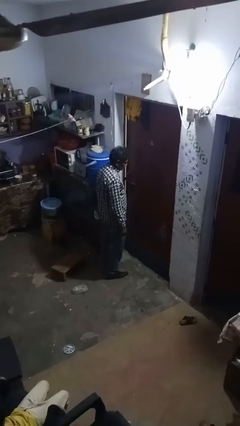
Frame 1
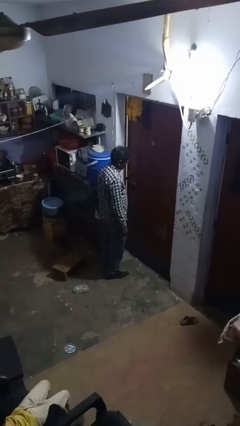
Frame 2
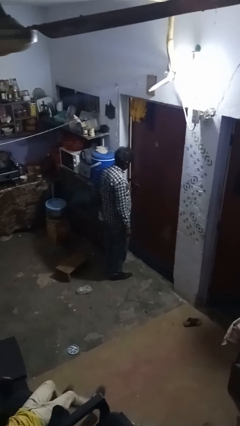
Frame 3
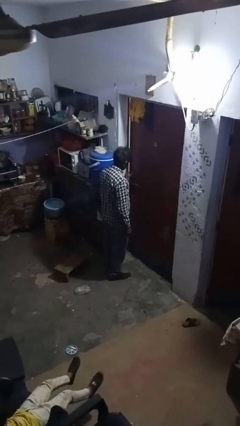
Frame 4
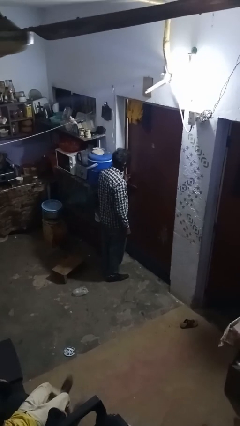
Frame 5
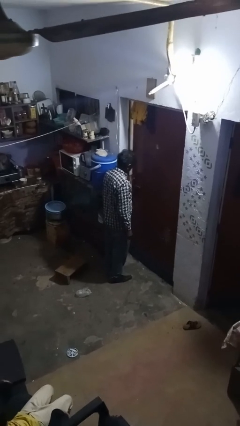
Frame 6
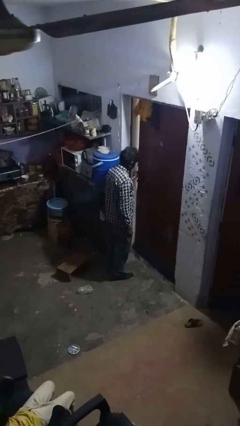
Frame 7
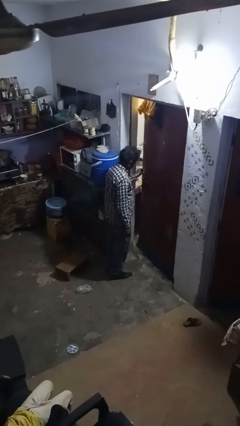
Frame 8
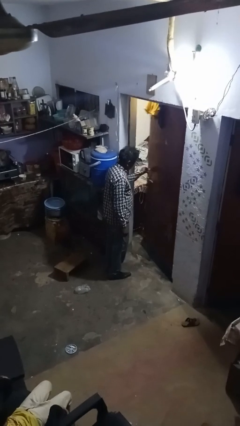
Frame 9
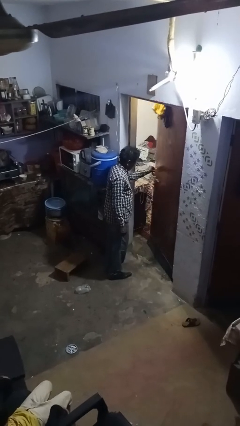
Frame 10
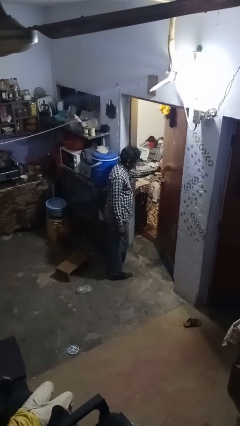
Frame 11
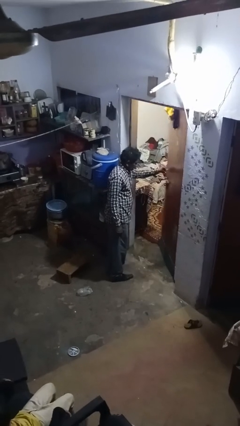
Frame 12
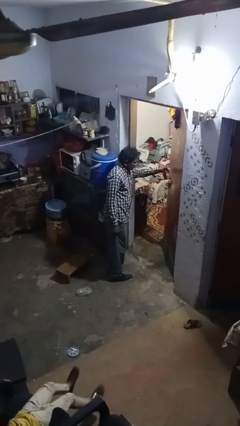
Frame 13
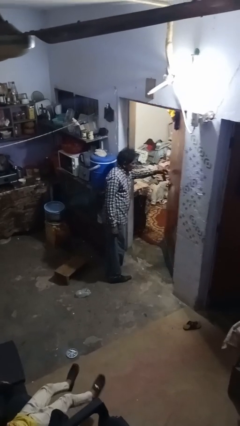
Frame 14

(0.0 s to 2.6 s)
person opens facility door

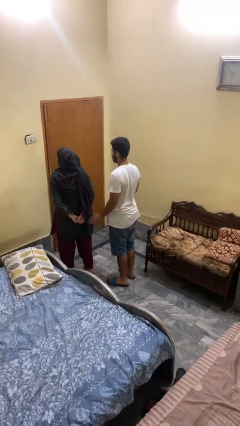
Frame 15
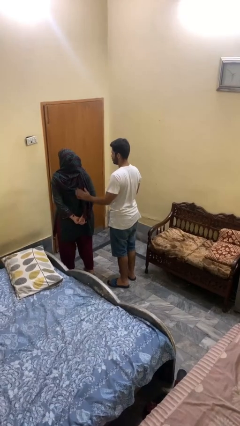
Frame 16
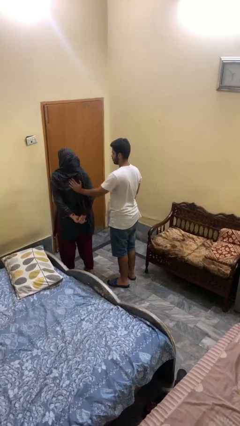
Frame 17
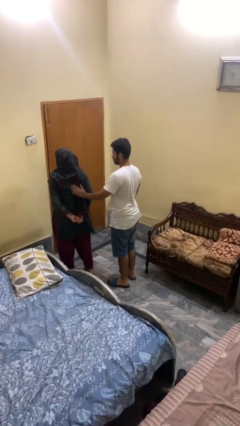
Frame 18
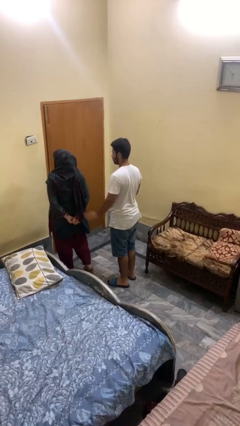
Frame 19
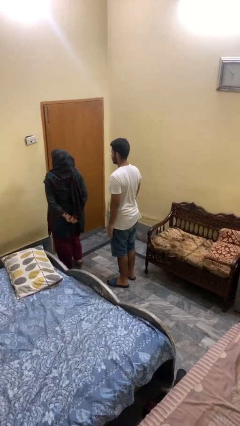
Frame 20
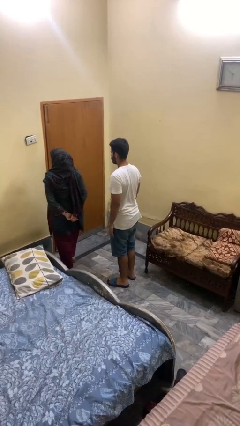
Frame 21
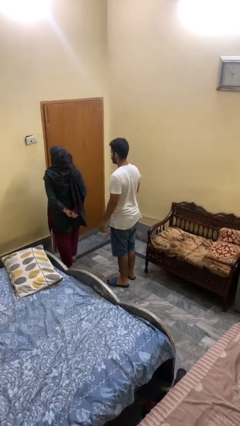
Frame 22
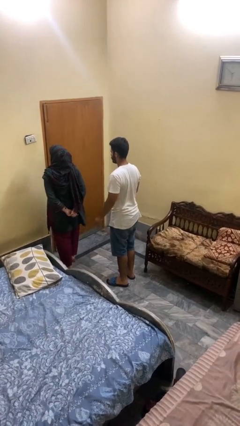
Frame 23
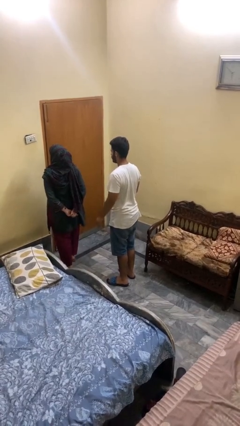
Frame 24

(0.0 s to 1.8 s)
person shoves person

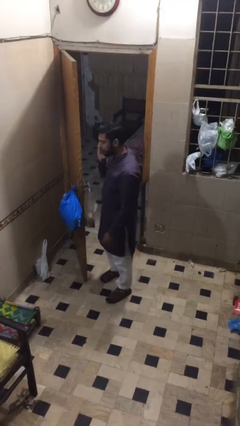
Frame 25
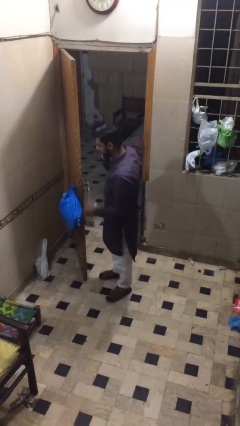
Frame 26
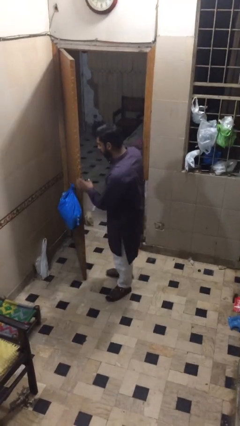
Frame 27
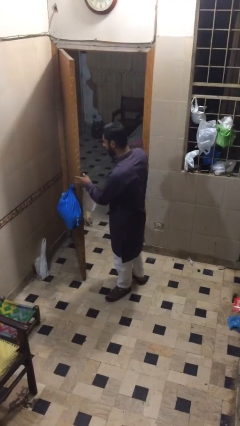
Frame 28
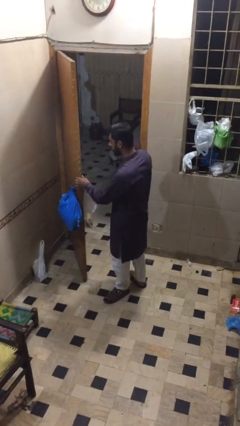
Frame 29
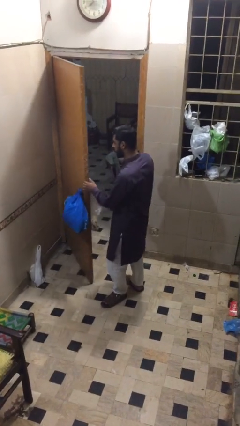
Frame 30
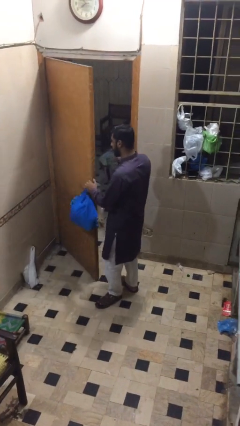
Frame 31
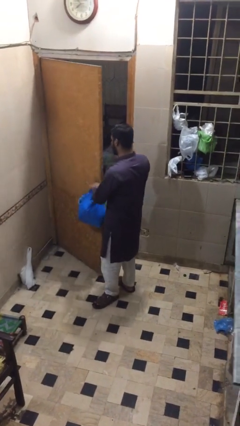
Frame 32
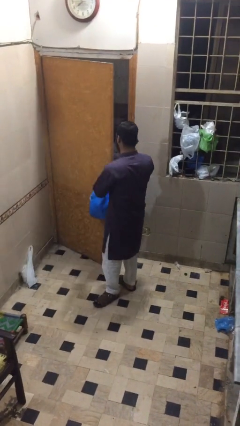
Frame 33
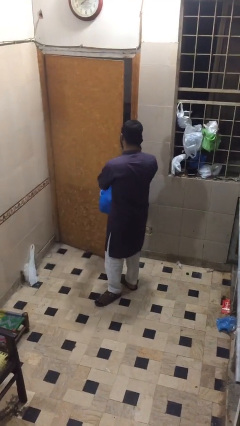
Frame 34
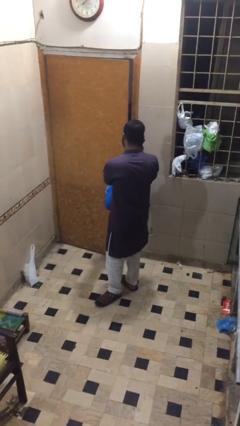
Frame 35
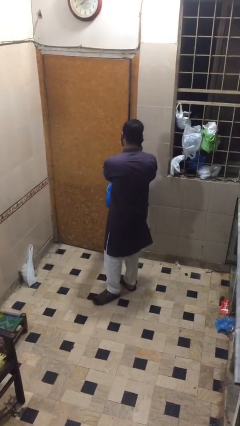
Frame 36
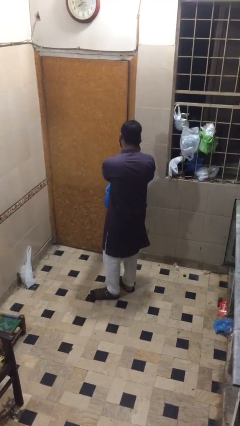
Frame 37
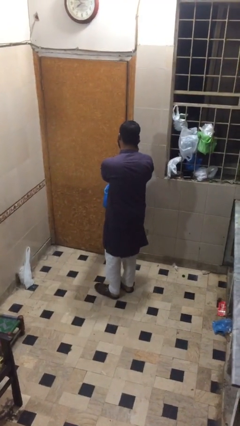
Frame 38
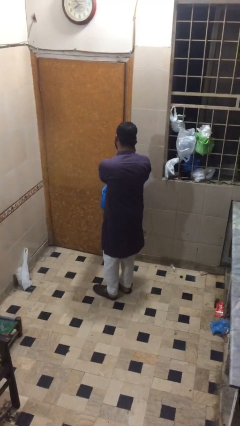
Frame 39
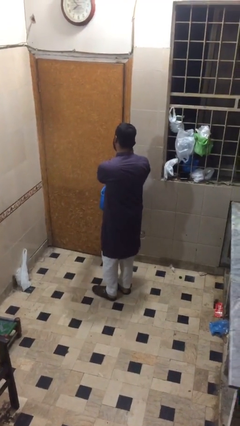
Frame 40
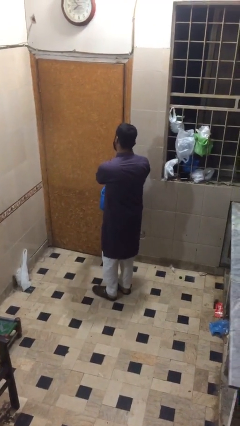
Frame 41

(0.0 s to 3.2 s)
person closes facility door

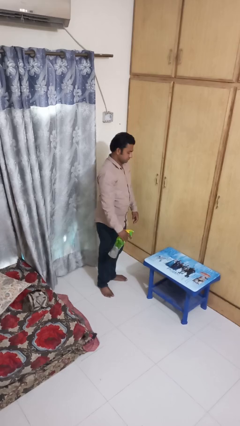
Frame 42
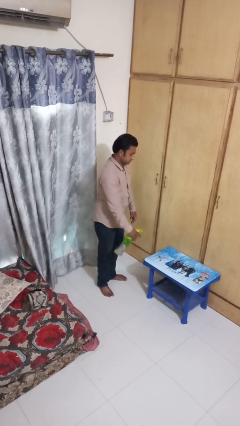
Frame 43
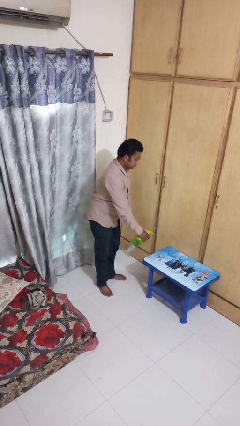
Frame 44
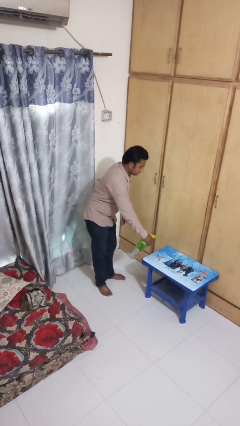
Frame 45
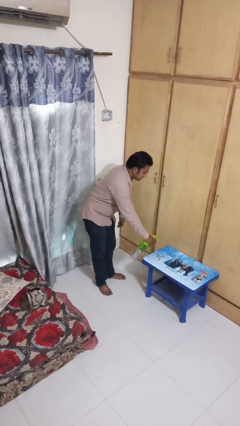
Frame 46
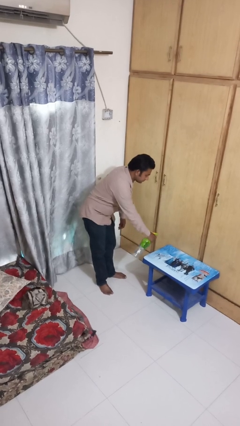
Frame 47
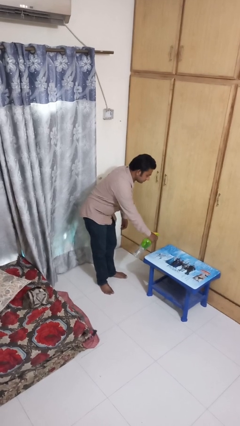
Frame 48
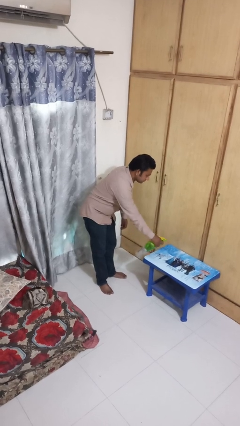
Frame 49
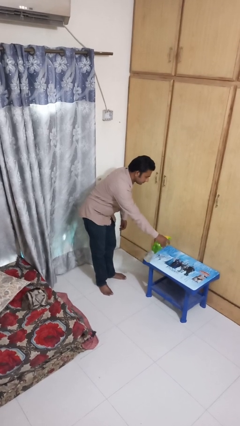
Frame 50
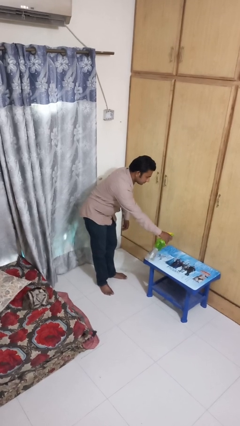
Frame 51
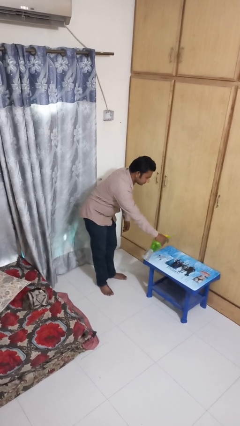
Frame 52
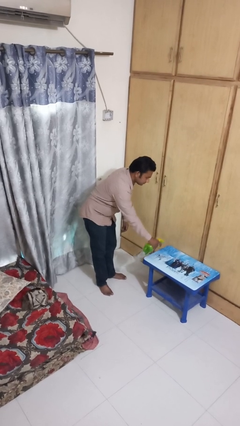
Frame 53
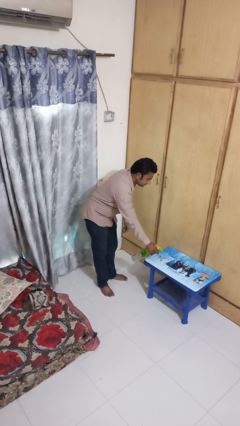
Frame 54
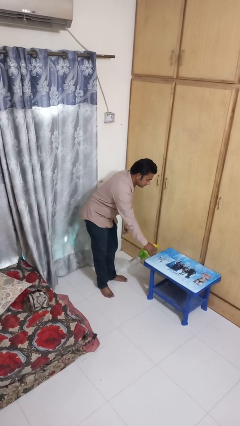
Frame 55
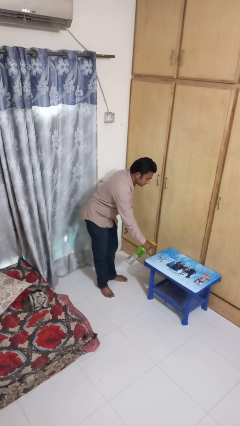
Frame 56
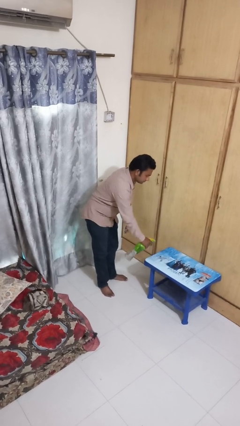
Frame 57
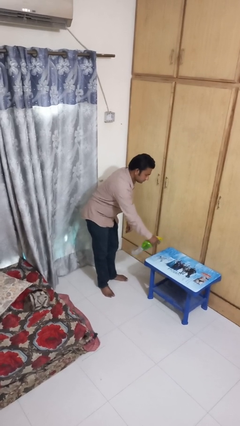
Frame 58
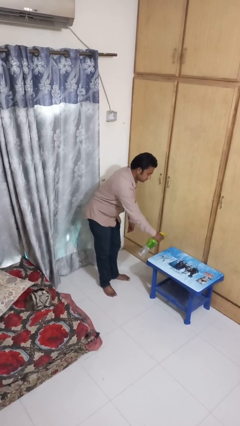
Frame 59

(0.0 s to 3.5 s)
person sprays from bottle

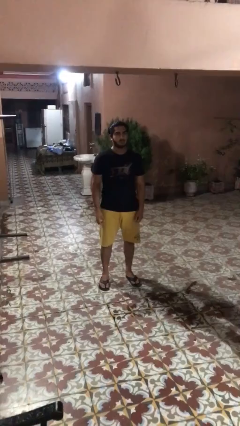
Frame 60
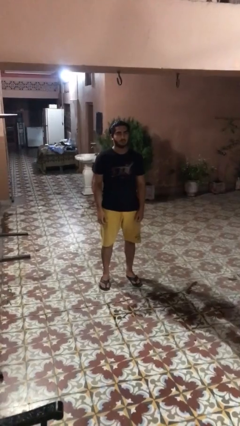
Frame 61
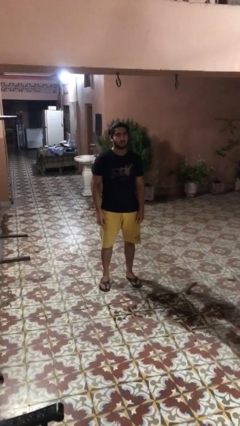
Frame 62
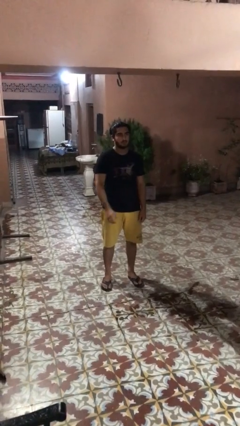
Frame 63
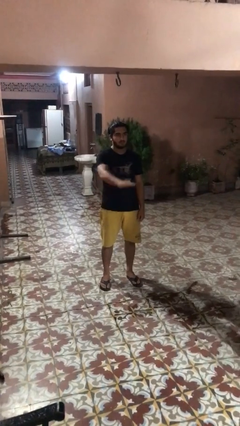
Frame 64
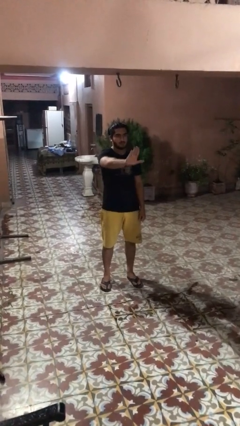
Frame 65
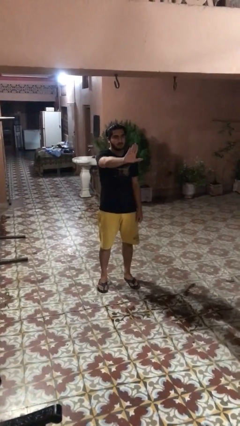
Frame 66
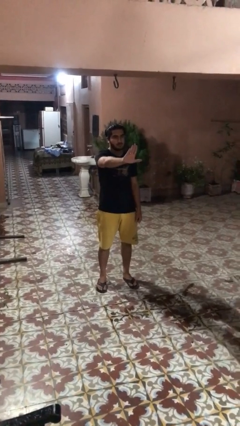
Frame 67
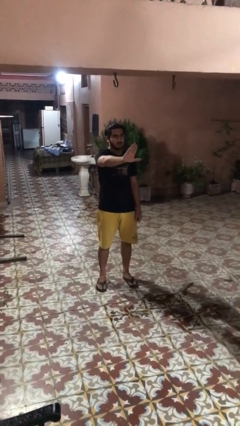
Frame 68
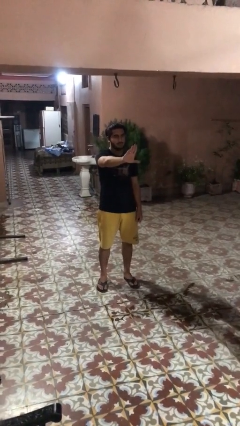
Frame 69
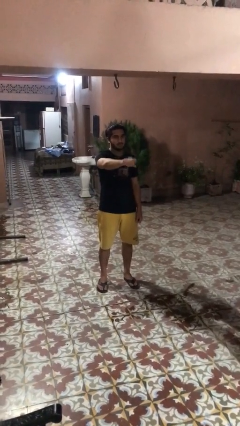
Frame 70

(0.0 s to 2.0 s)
person gestures stop

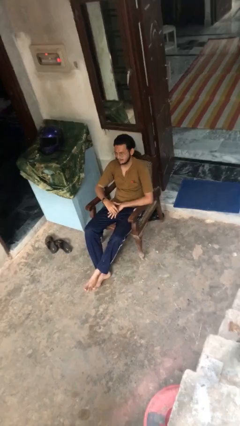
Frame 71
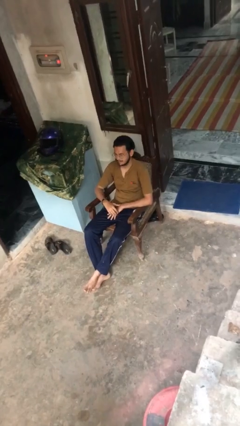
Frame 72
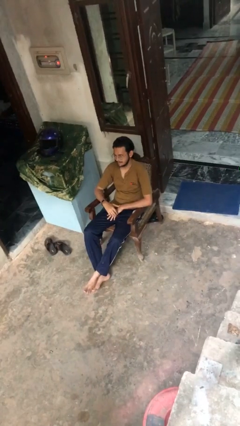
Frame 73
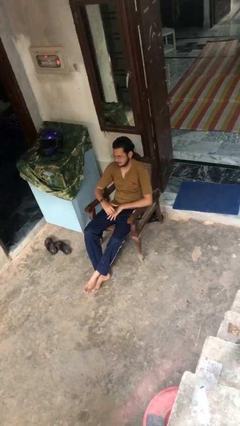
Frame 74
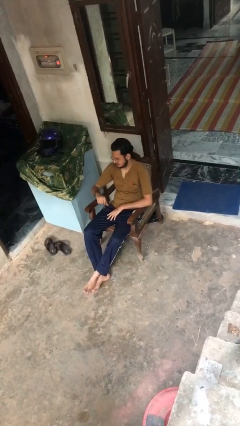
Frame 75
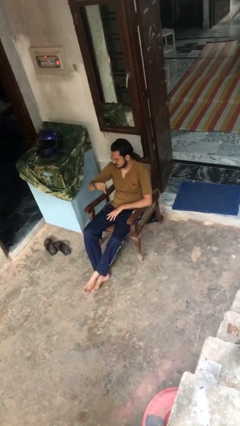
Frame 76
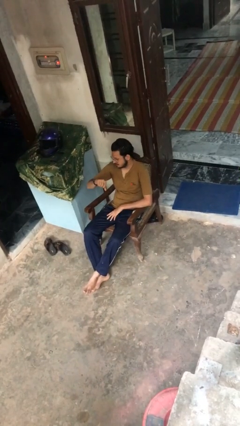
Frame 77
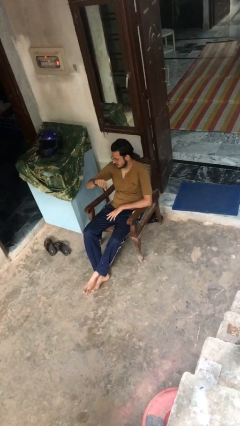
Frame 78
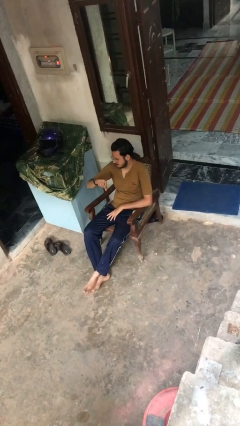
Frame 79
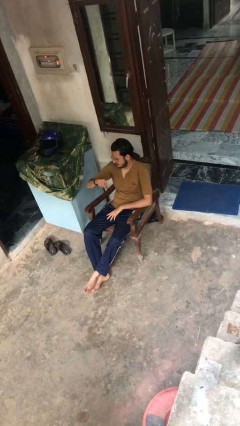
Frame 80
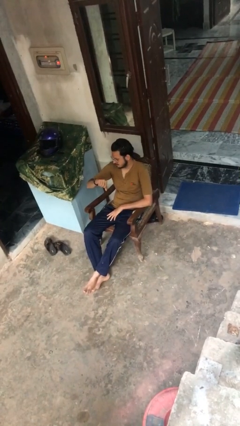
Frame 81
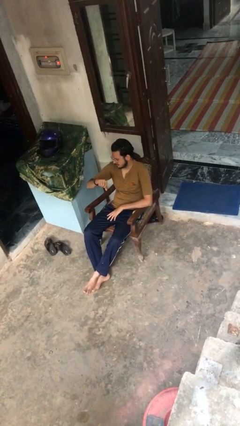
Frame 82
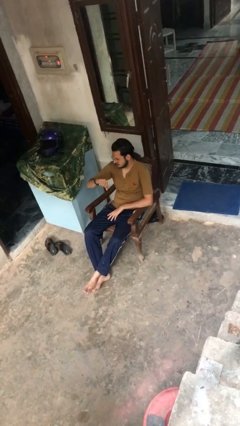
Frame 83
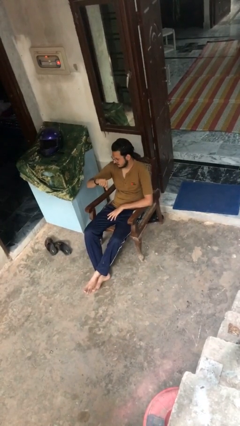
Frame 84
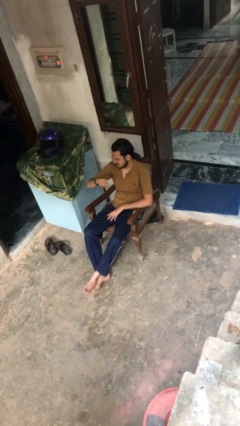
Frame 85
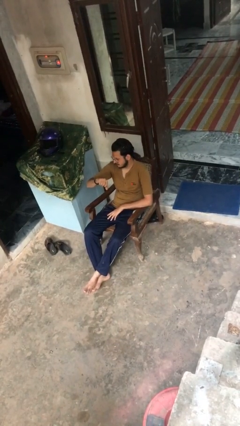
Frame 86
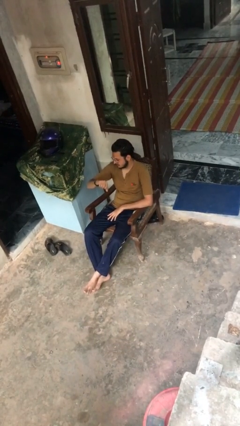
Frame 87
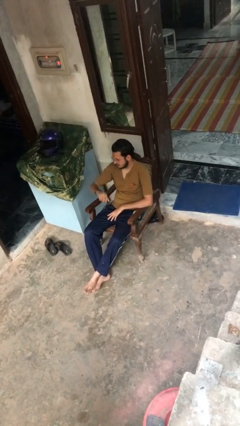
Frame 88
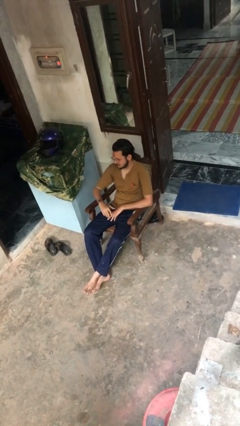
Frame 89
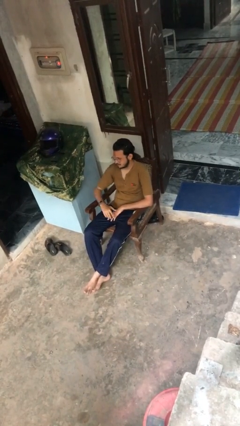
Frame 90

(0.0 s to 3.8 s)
person looks at wristwatch

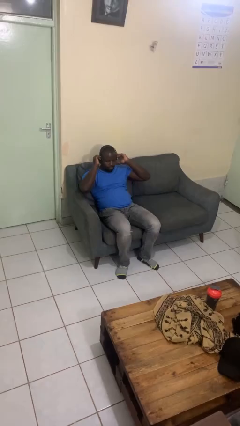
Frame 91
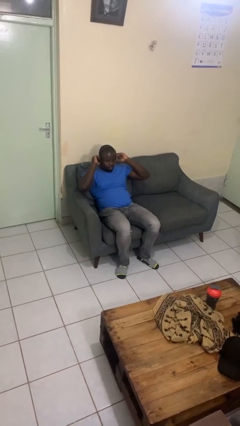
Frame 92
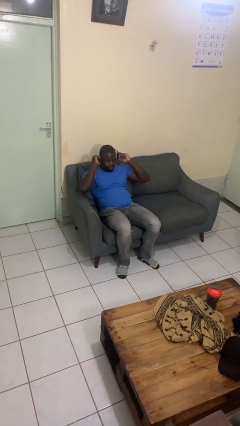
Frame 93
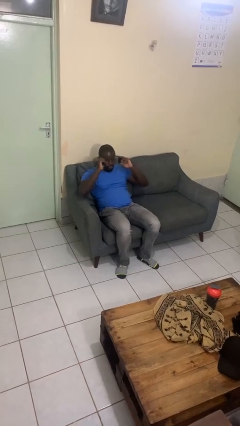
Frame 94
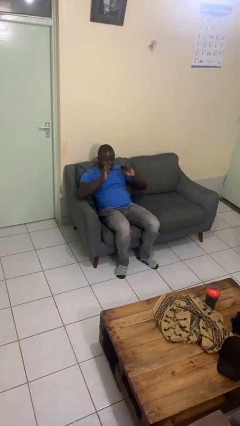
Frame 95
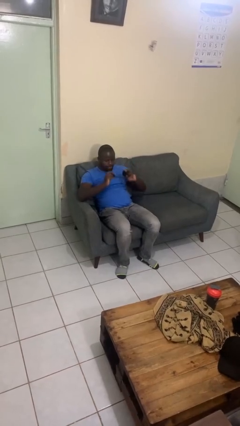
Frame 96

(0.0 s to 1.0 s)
person takes off headphones
